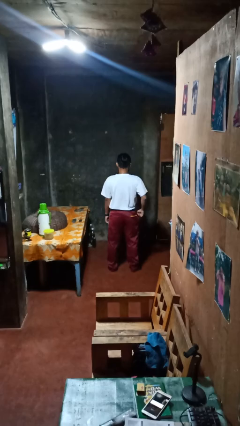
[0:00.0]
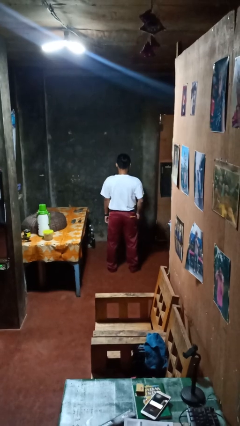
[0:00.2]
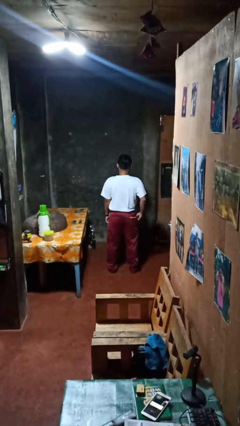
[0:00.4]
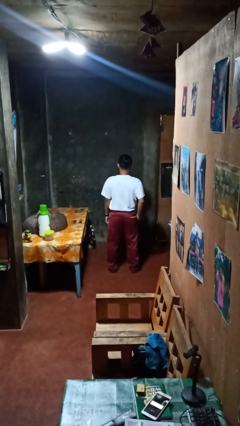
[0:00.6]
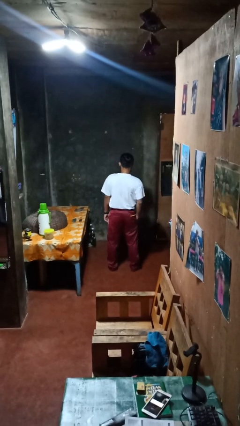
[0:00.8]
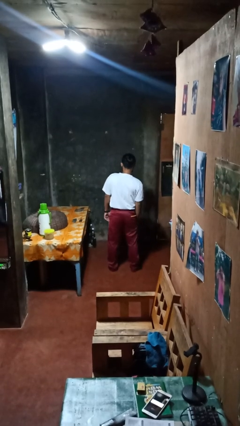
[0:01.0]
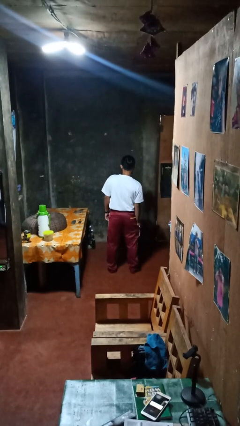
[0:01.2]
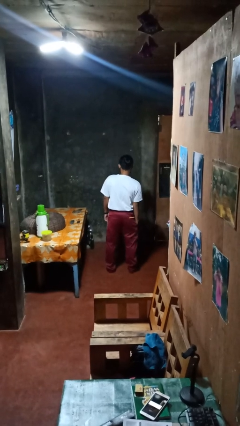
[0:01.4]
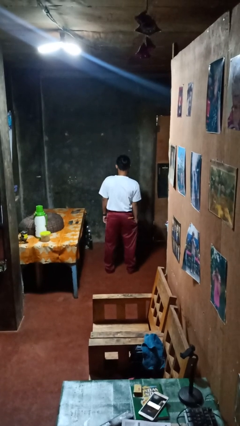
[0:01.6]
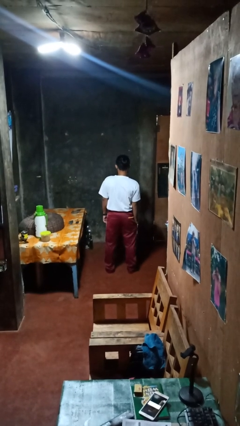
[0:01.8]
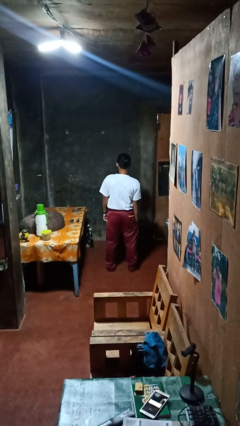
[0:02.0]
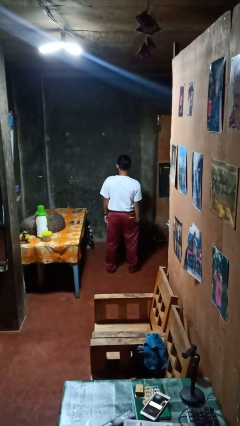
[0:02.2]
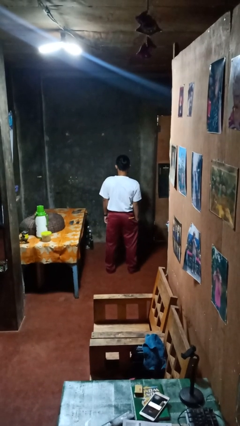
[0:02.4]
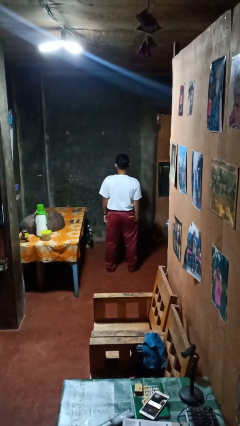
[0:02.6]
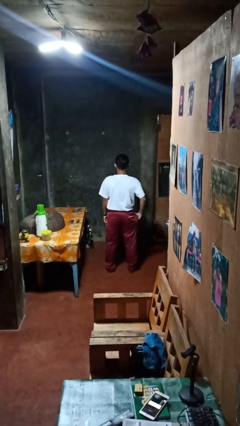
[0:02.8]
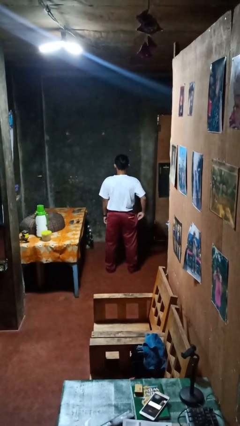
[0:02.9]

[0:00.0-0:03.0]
person puts hands in back pockets

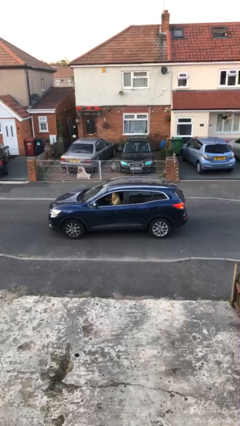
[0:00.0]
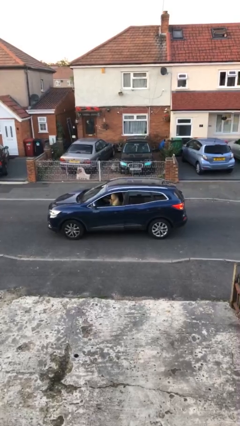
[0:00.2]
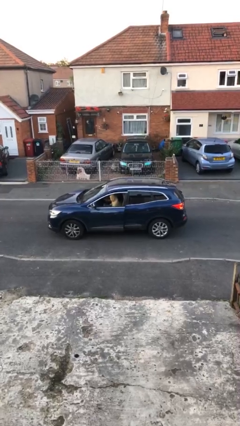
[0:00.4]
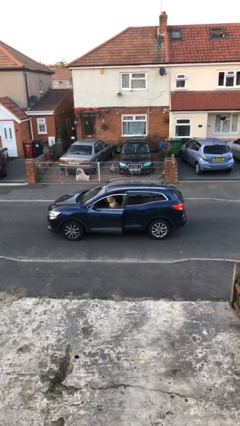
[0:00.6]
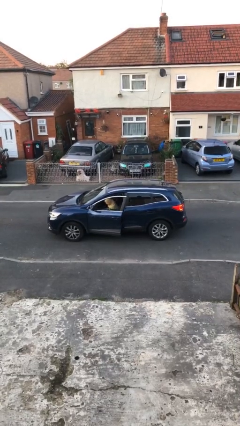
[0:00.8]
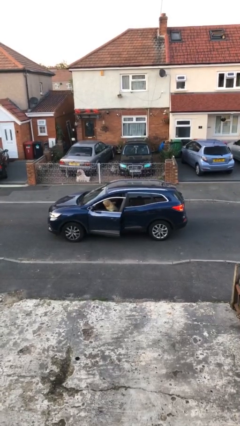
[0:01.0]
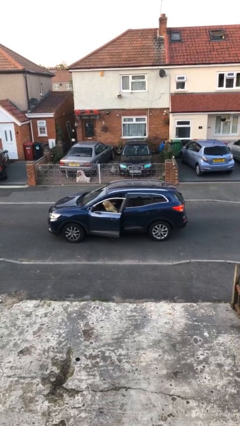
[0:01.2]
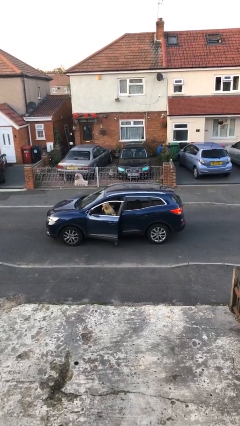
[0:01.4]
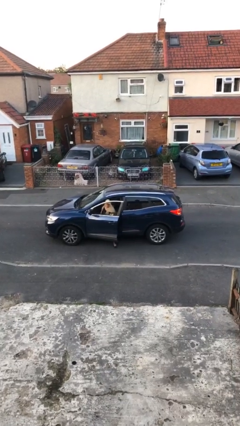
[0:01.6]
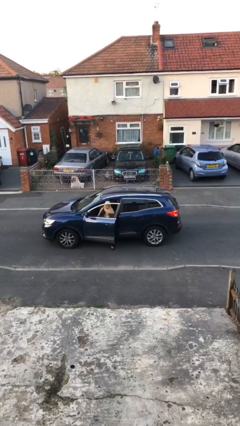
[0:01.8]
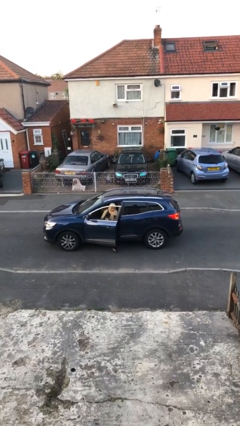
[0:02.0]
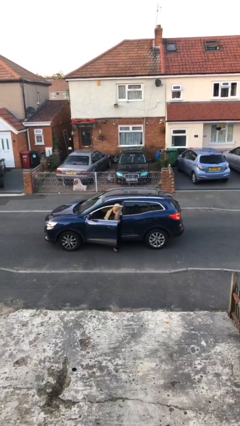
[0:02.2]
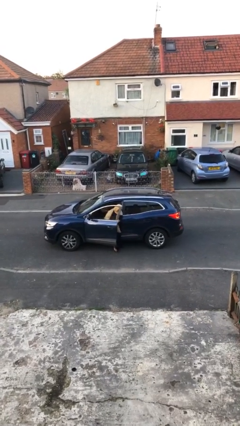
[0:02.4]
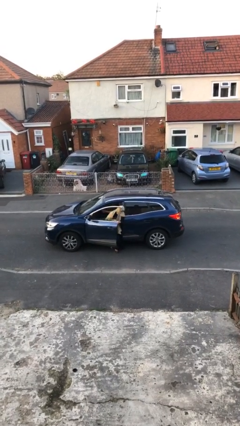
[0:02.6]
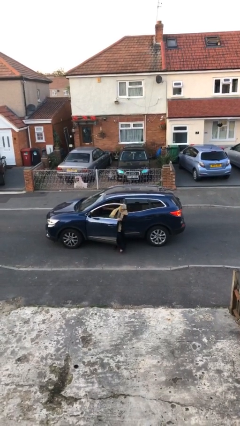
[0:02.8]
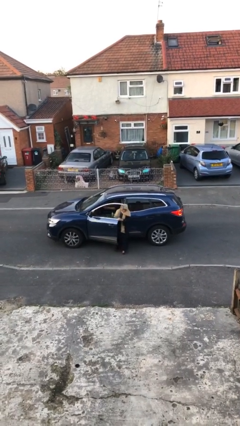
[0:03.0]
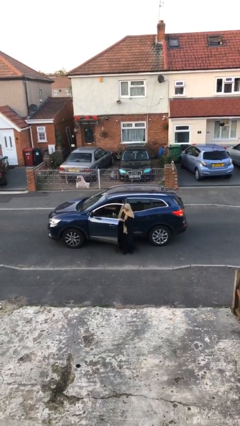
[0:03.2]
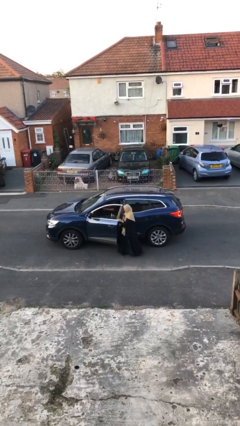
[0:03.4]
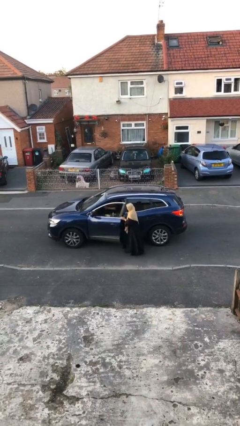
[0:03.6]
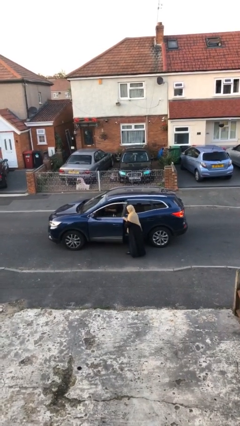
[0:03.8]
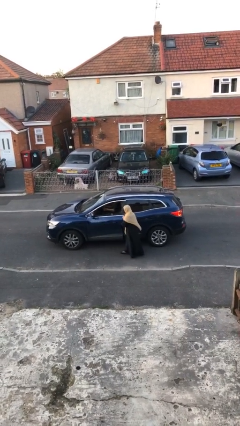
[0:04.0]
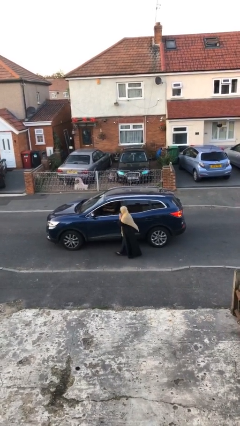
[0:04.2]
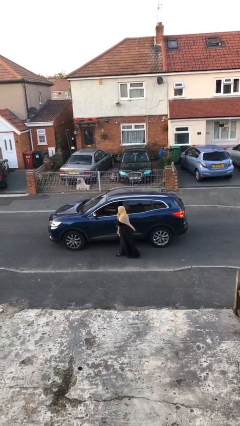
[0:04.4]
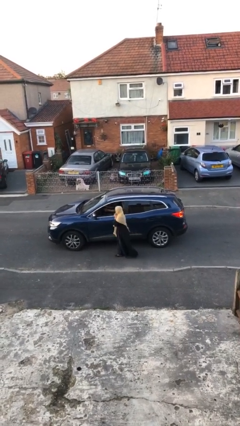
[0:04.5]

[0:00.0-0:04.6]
car drops off person

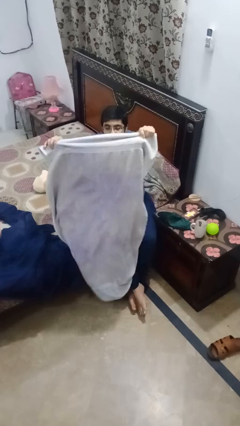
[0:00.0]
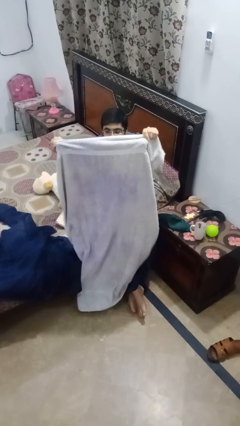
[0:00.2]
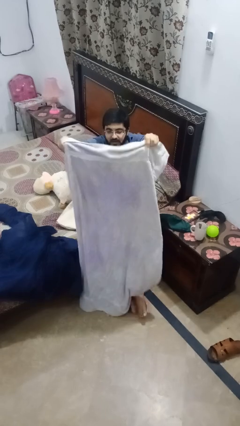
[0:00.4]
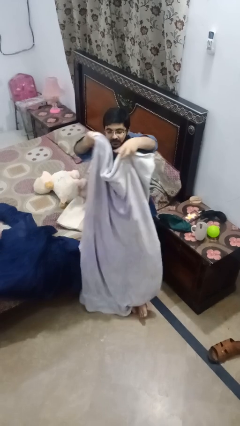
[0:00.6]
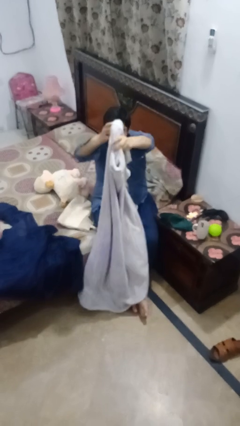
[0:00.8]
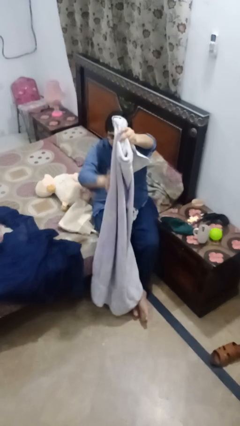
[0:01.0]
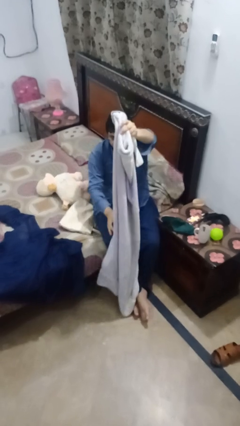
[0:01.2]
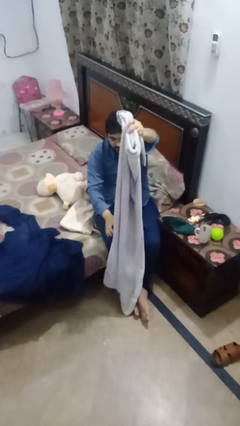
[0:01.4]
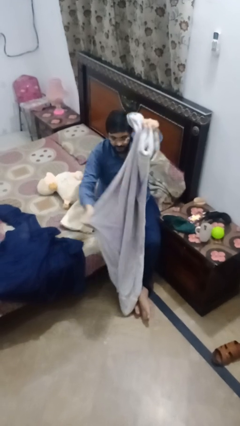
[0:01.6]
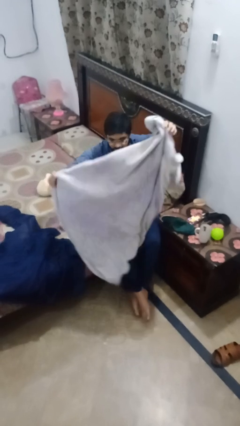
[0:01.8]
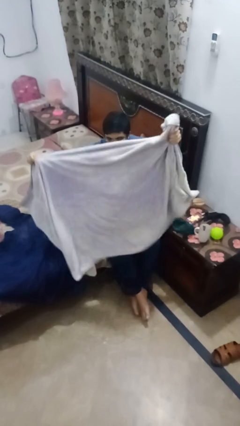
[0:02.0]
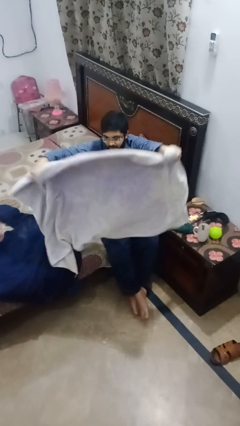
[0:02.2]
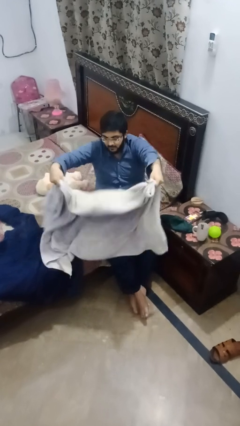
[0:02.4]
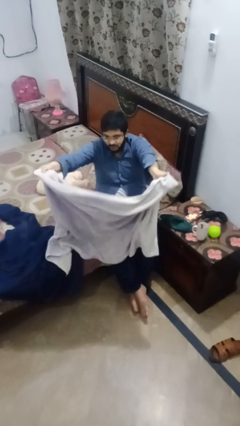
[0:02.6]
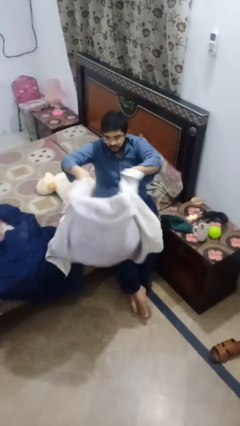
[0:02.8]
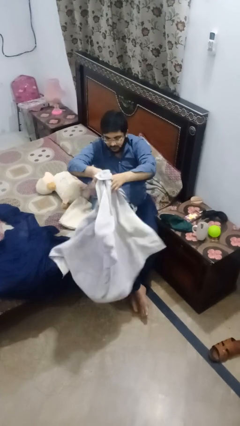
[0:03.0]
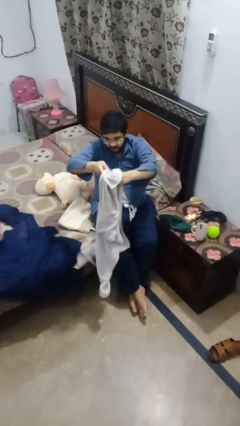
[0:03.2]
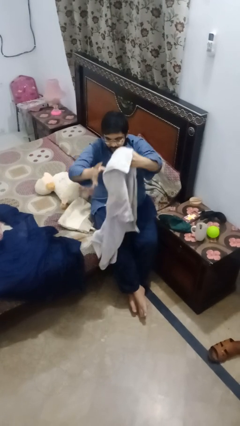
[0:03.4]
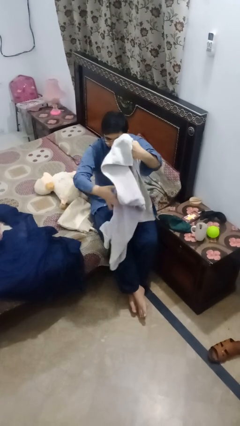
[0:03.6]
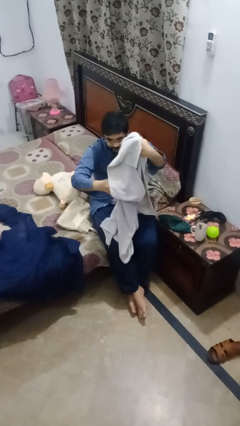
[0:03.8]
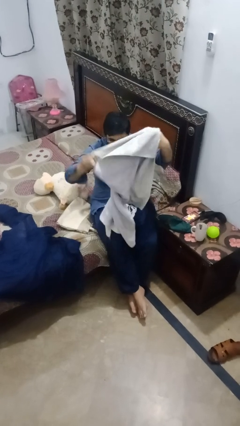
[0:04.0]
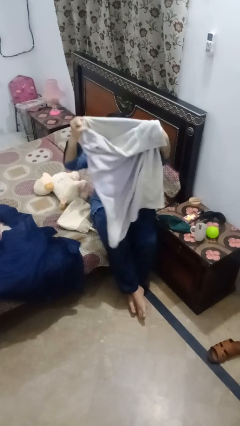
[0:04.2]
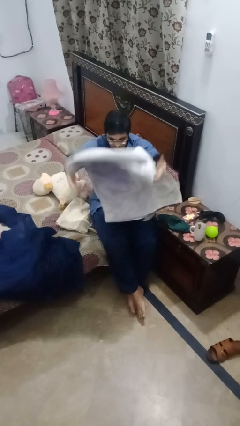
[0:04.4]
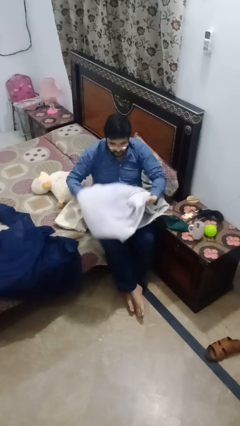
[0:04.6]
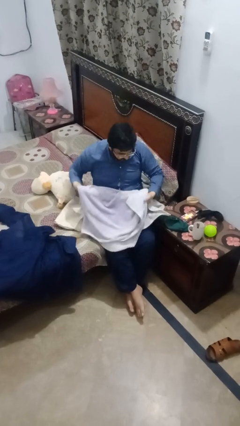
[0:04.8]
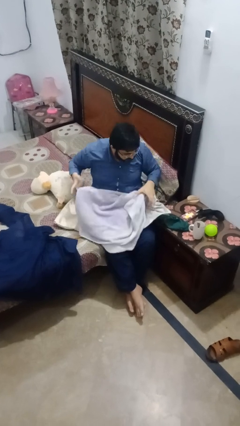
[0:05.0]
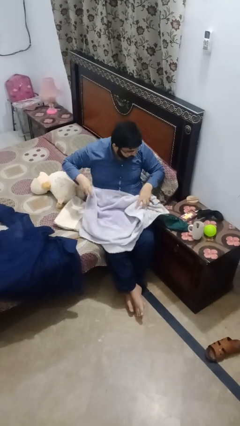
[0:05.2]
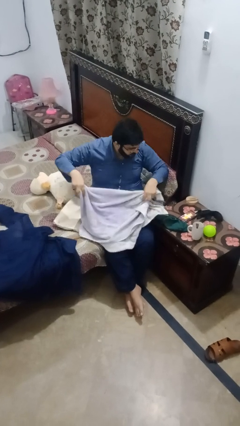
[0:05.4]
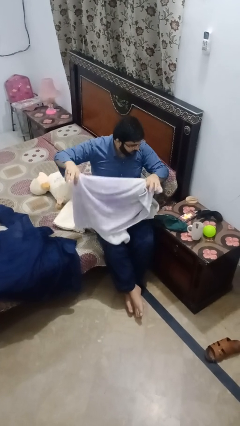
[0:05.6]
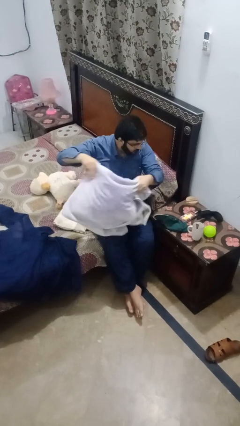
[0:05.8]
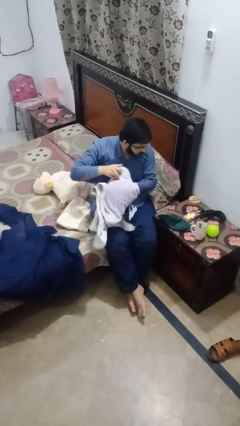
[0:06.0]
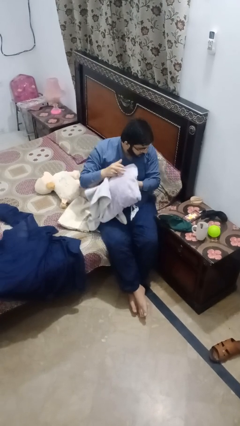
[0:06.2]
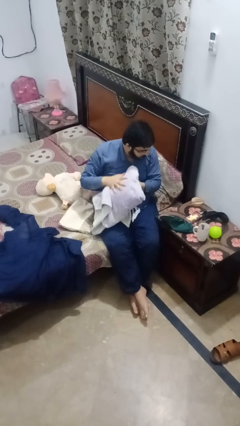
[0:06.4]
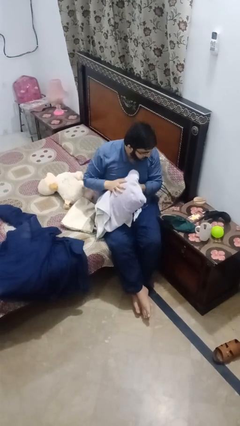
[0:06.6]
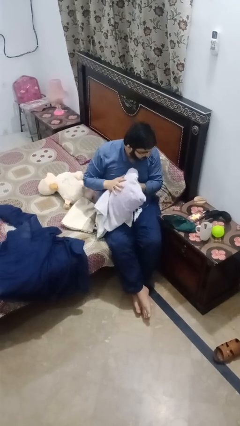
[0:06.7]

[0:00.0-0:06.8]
person folds towel

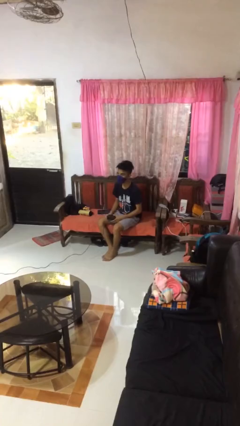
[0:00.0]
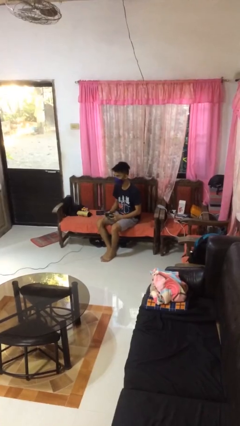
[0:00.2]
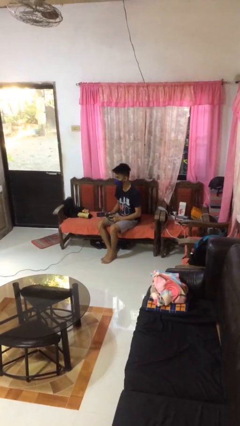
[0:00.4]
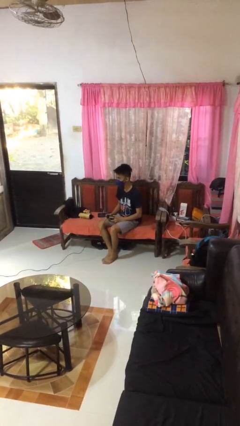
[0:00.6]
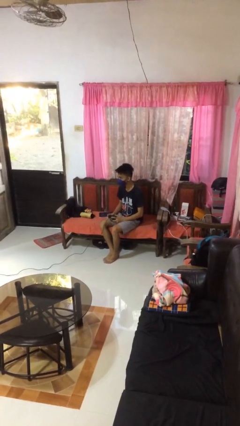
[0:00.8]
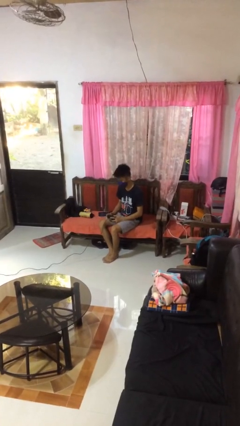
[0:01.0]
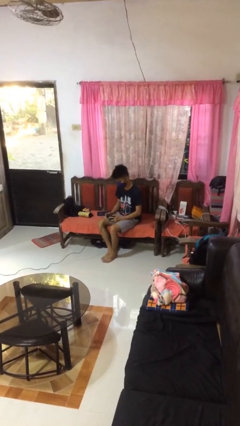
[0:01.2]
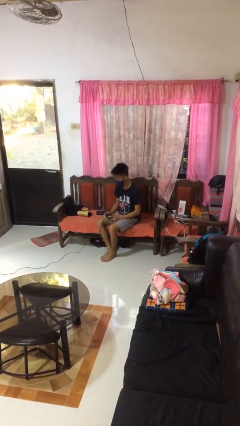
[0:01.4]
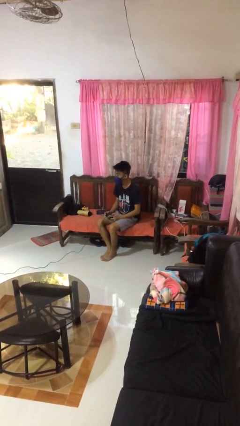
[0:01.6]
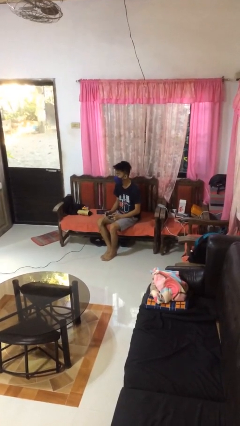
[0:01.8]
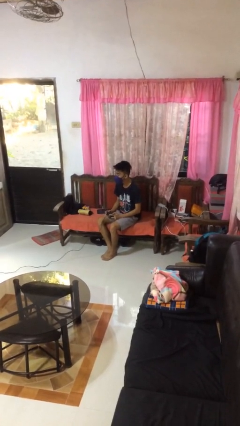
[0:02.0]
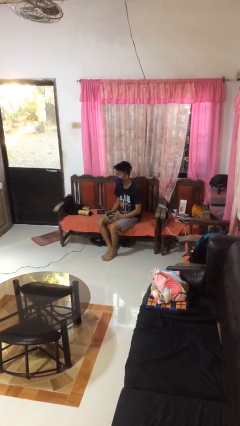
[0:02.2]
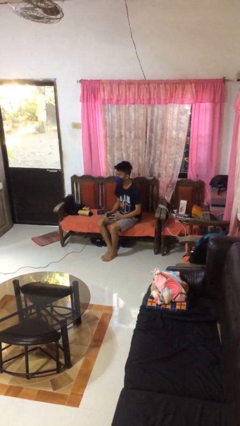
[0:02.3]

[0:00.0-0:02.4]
person interacts with handheld game

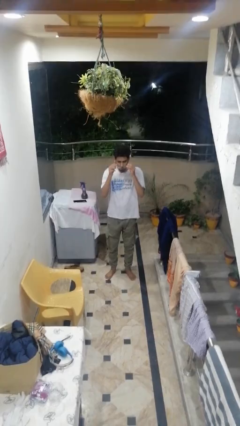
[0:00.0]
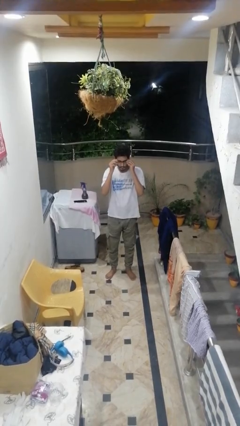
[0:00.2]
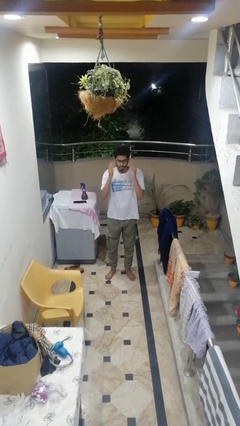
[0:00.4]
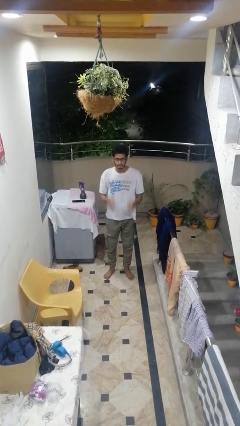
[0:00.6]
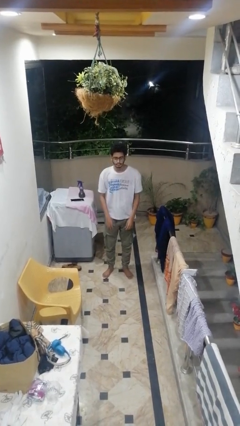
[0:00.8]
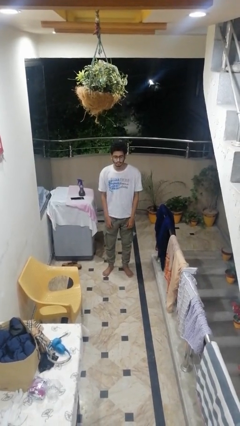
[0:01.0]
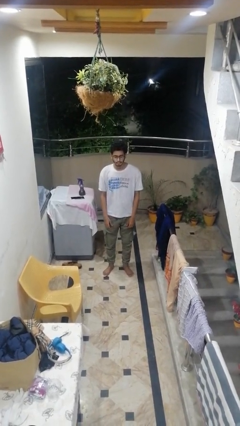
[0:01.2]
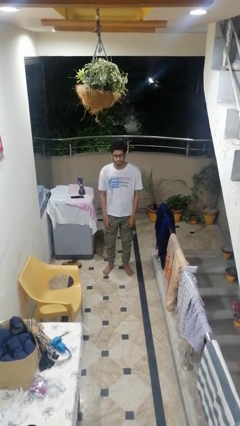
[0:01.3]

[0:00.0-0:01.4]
person puts on glasses
